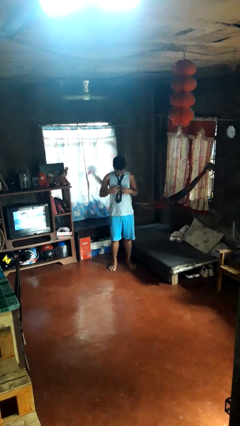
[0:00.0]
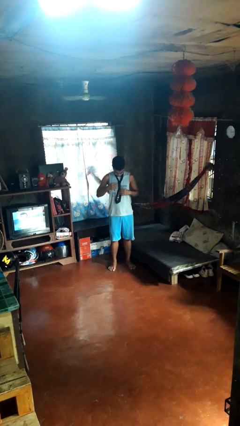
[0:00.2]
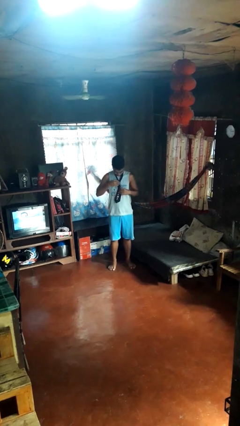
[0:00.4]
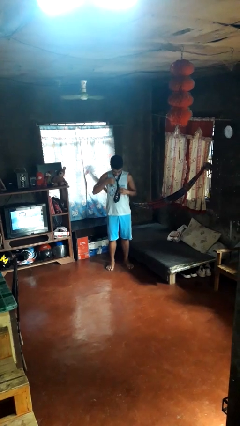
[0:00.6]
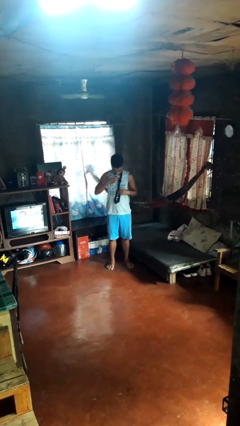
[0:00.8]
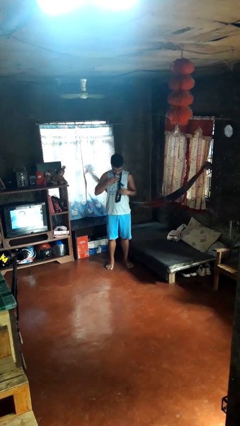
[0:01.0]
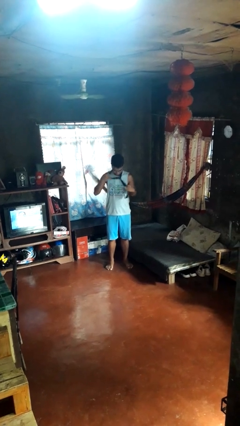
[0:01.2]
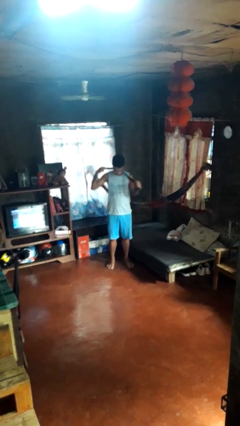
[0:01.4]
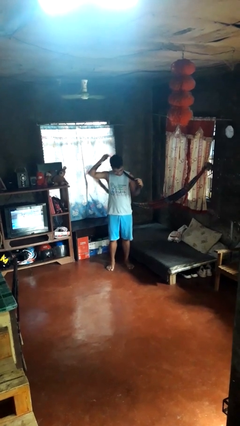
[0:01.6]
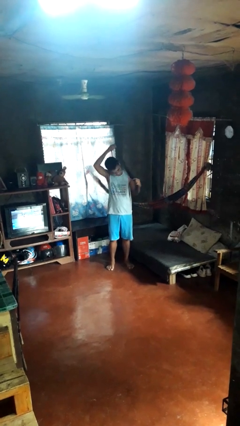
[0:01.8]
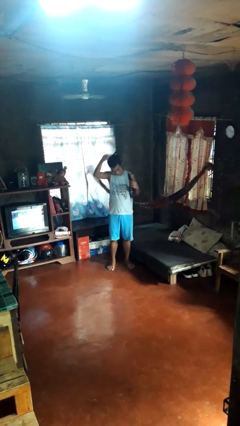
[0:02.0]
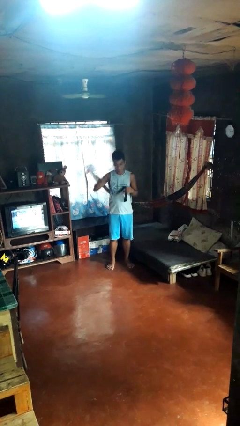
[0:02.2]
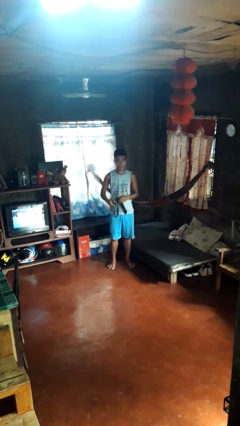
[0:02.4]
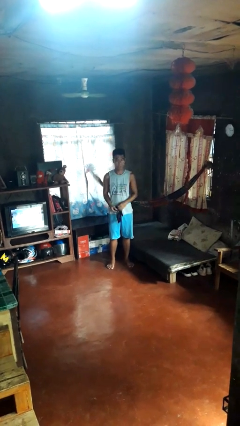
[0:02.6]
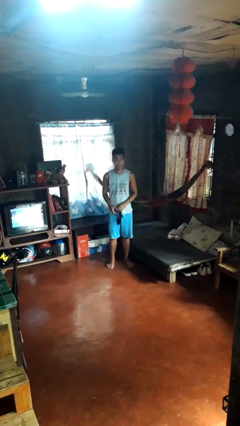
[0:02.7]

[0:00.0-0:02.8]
person takes off necktie

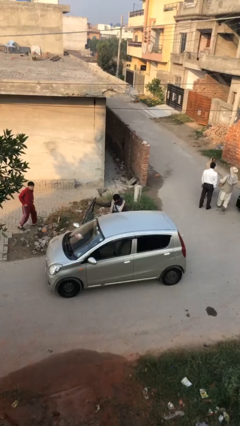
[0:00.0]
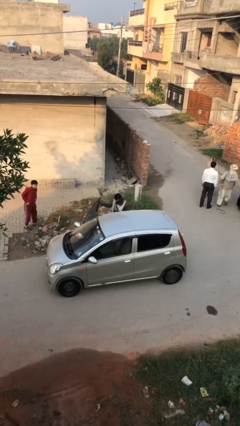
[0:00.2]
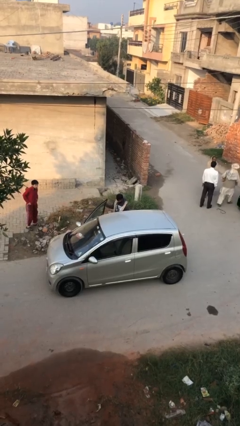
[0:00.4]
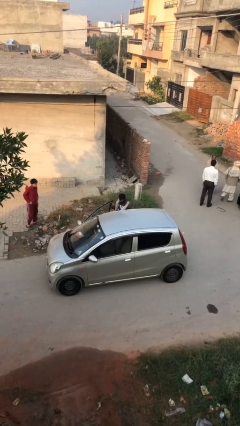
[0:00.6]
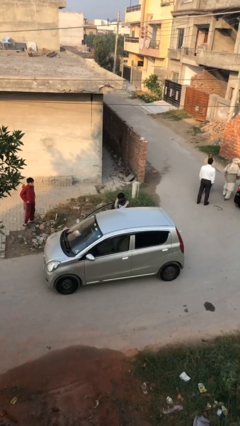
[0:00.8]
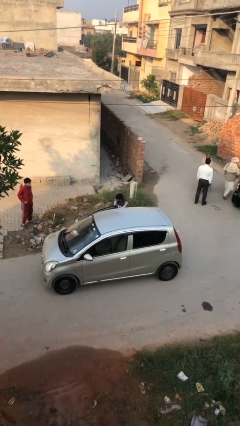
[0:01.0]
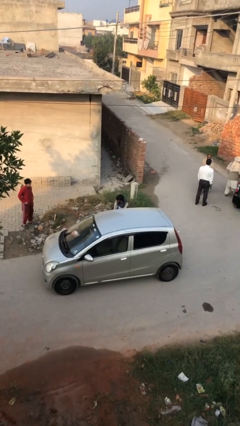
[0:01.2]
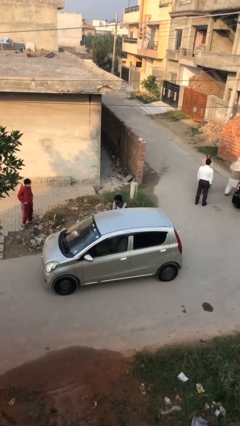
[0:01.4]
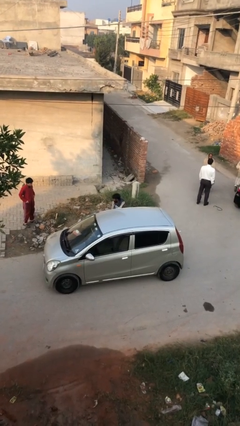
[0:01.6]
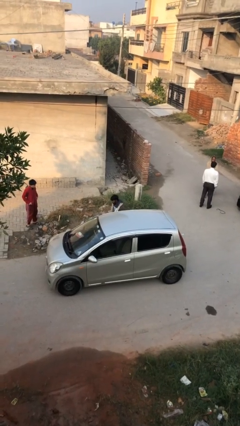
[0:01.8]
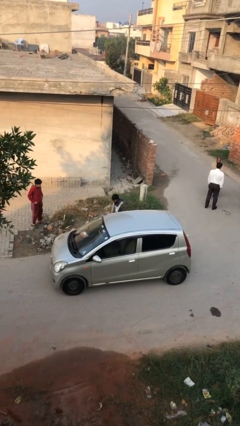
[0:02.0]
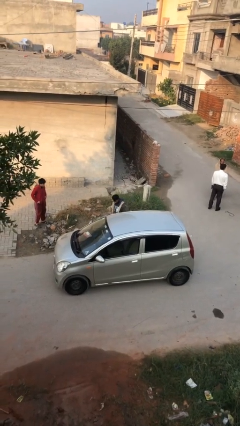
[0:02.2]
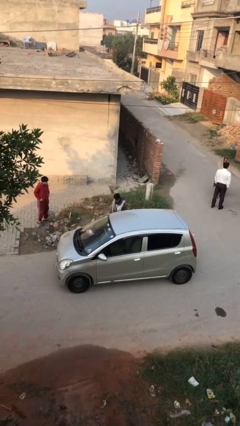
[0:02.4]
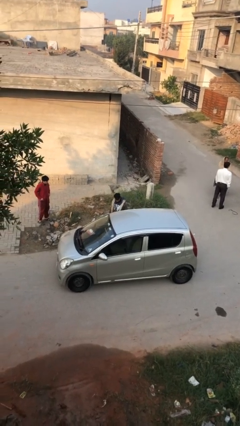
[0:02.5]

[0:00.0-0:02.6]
person closes car door

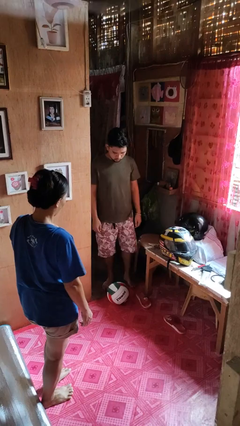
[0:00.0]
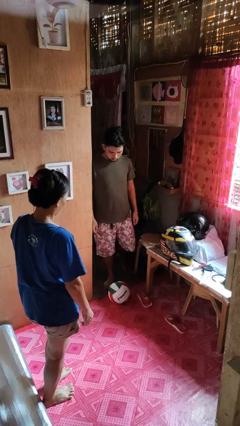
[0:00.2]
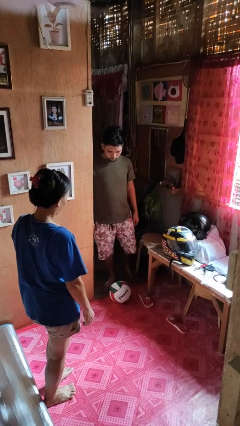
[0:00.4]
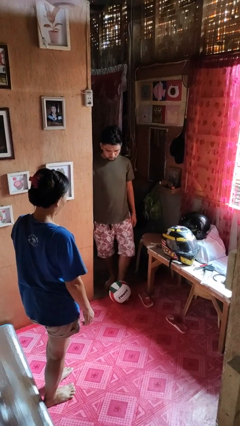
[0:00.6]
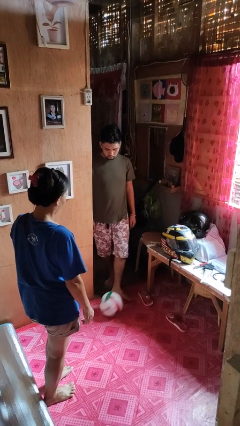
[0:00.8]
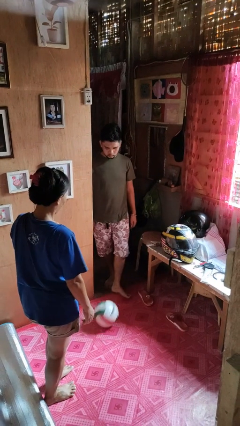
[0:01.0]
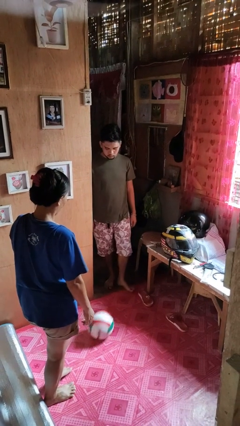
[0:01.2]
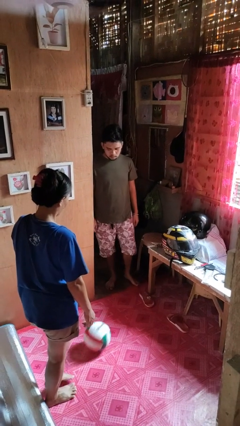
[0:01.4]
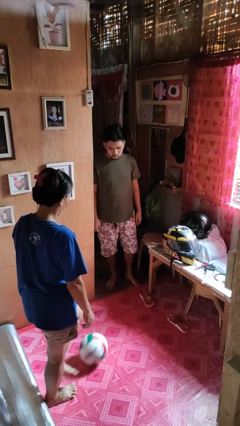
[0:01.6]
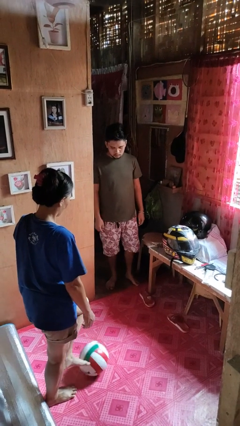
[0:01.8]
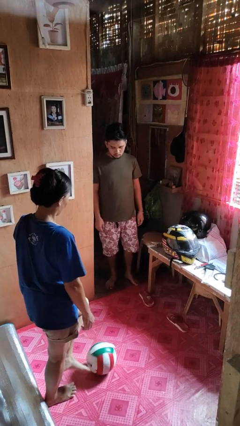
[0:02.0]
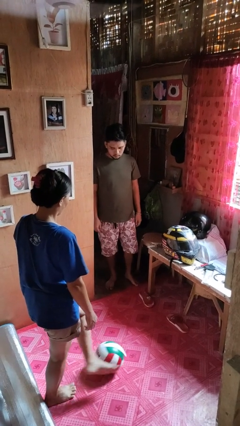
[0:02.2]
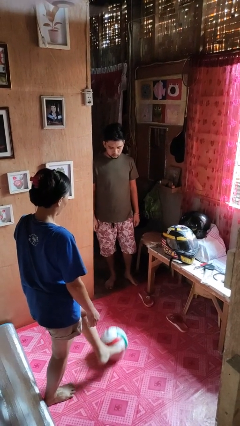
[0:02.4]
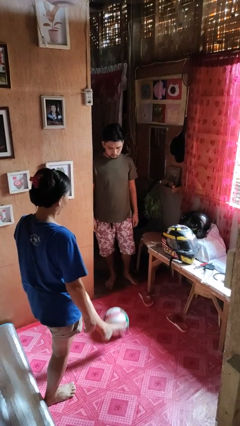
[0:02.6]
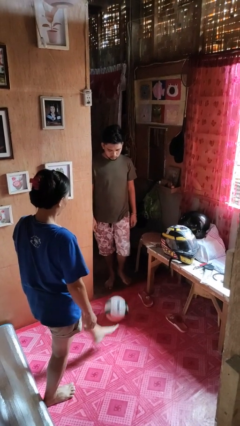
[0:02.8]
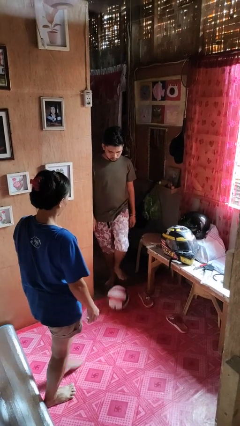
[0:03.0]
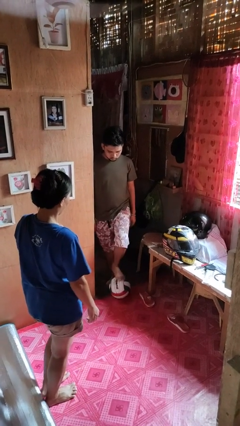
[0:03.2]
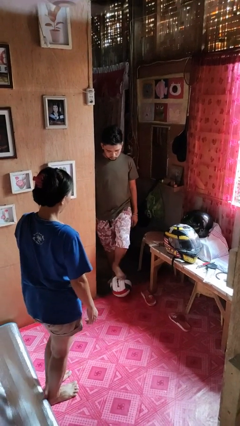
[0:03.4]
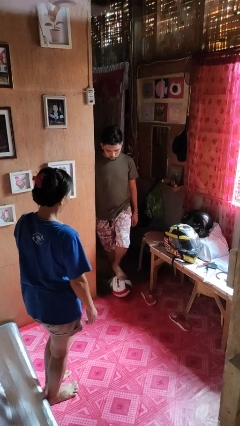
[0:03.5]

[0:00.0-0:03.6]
person kicks object to person

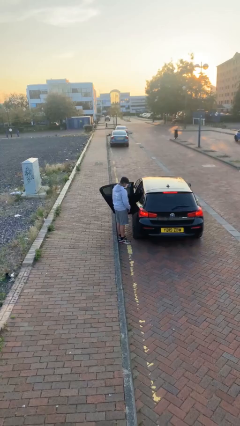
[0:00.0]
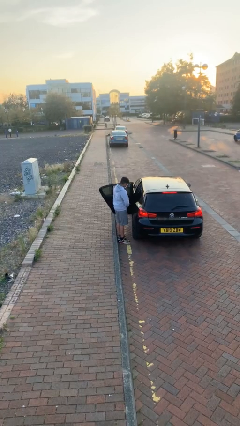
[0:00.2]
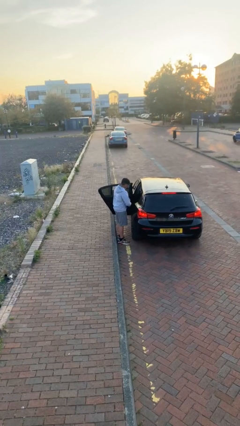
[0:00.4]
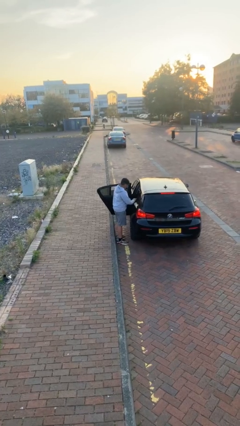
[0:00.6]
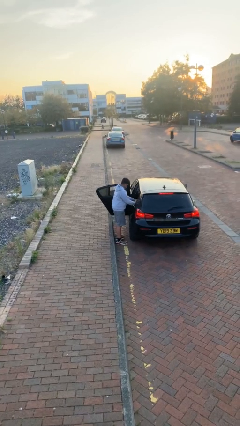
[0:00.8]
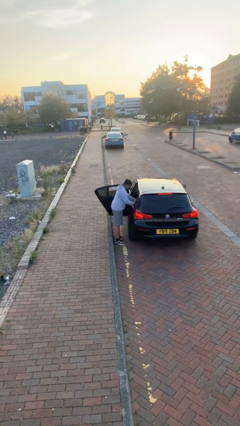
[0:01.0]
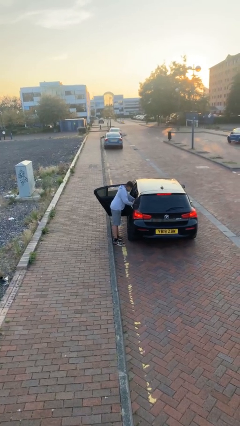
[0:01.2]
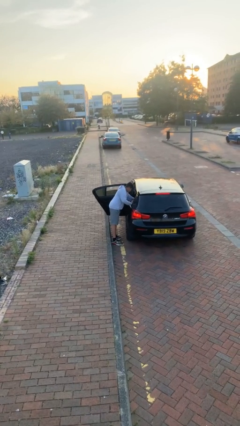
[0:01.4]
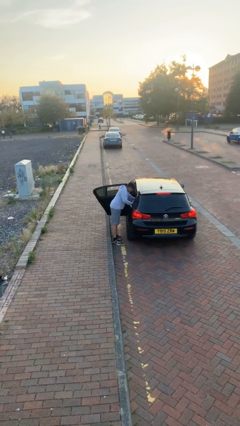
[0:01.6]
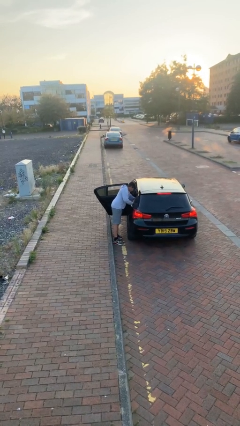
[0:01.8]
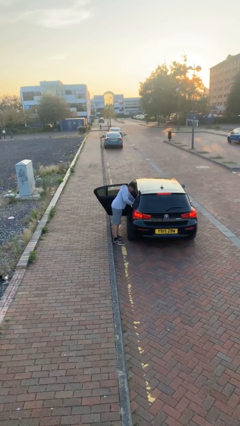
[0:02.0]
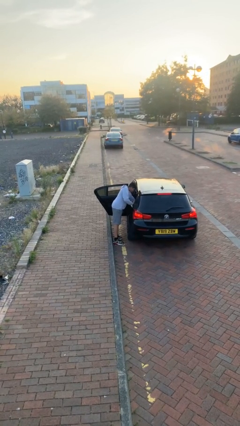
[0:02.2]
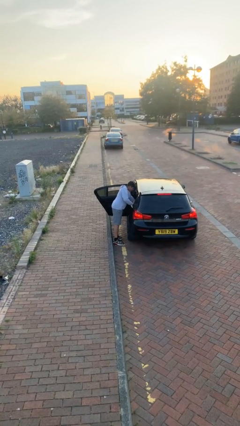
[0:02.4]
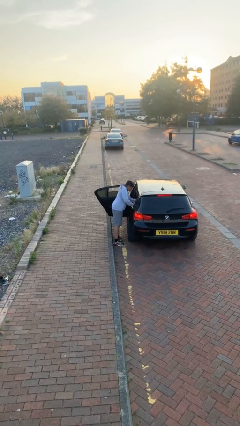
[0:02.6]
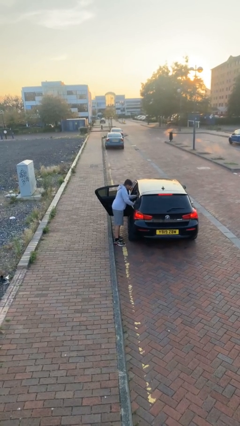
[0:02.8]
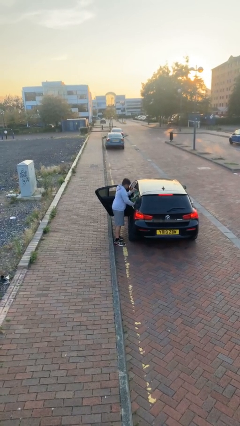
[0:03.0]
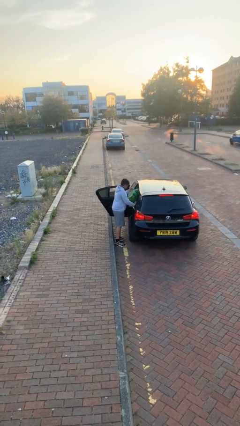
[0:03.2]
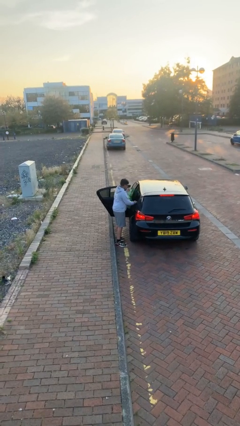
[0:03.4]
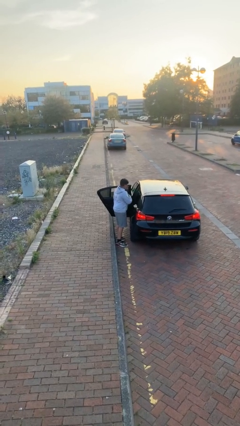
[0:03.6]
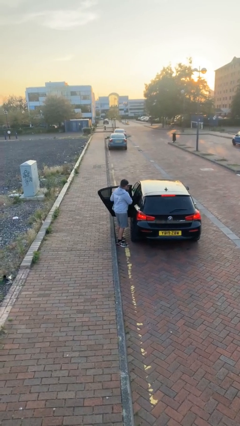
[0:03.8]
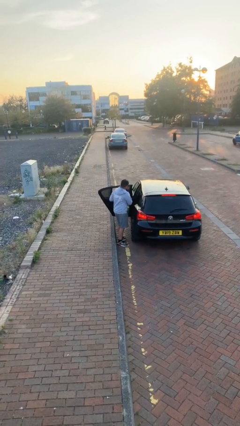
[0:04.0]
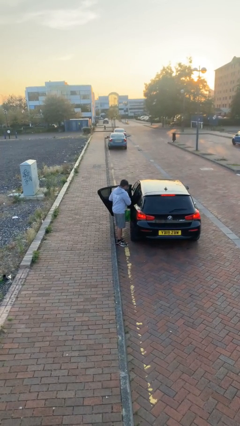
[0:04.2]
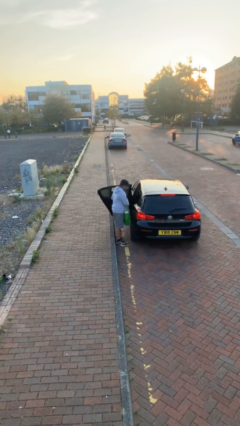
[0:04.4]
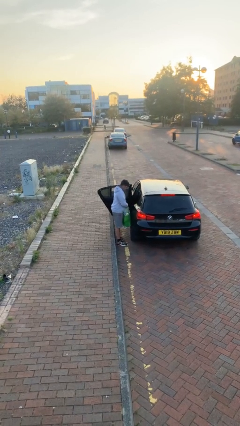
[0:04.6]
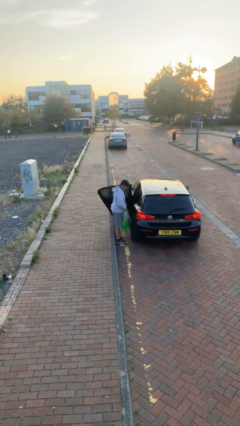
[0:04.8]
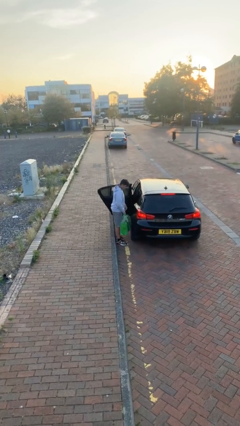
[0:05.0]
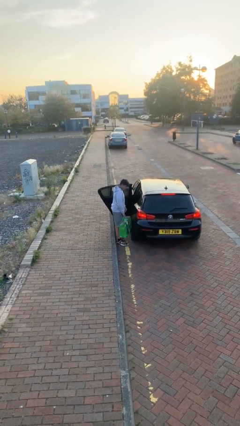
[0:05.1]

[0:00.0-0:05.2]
person unloads car

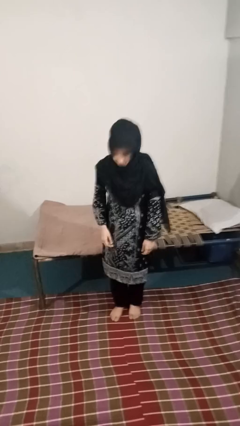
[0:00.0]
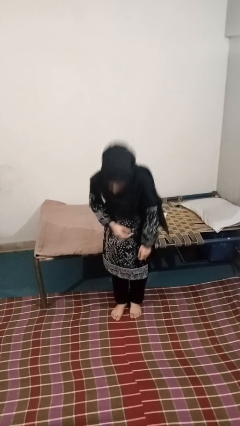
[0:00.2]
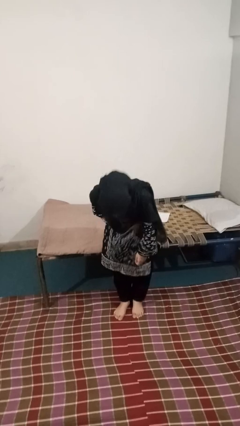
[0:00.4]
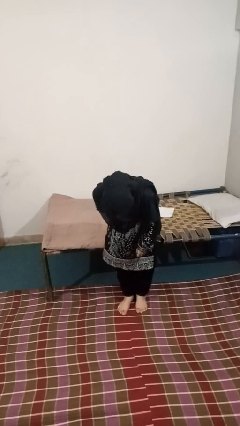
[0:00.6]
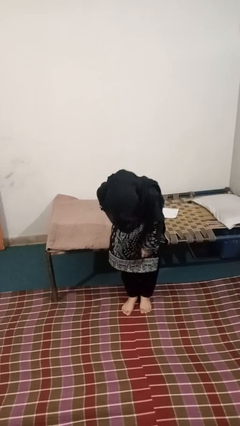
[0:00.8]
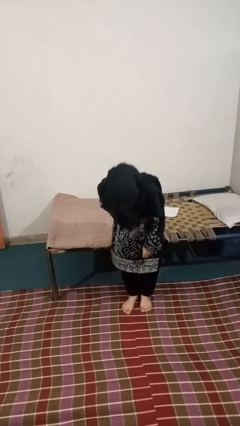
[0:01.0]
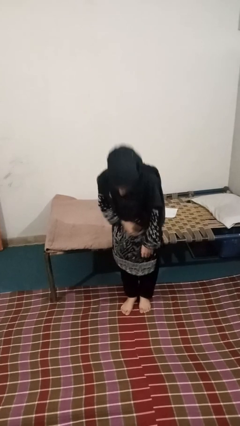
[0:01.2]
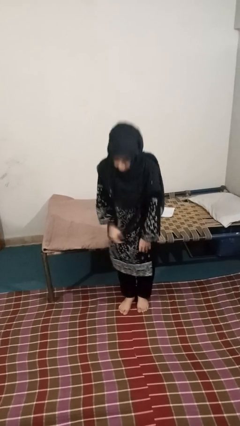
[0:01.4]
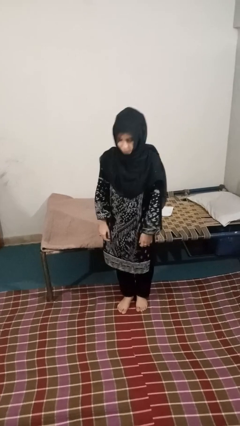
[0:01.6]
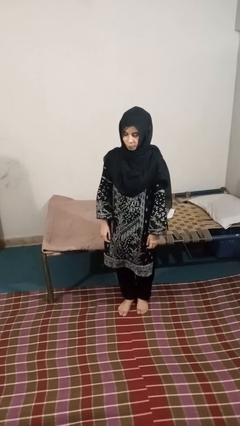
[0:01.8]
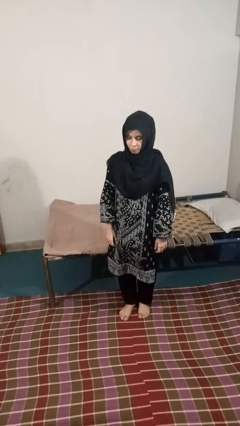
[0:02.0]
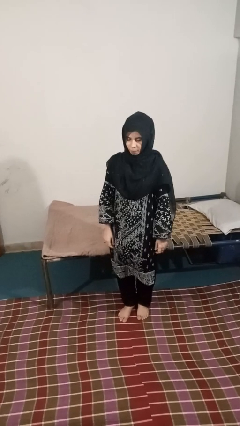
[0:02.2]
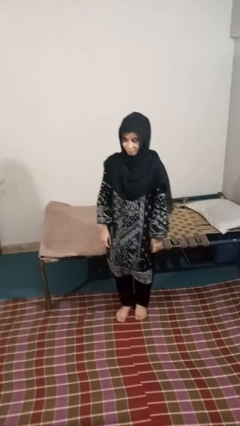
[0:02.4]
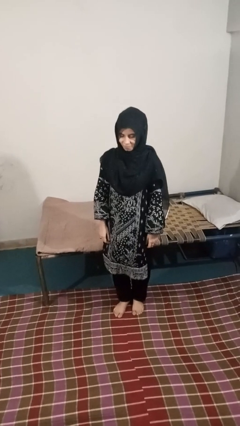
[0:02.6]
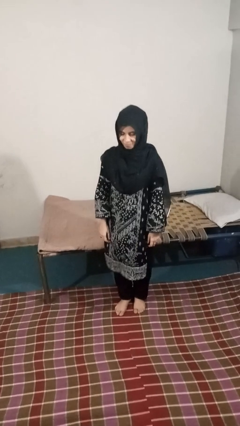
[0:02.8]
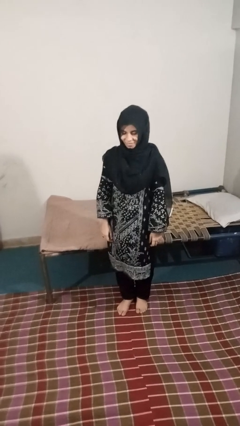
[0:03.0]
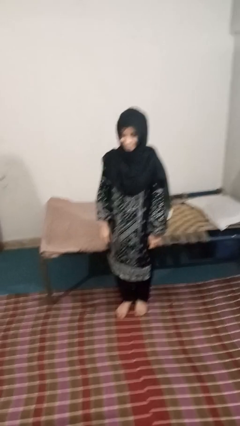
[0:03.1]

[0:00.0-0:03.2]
person bows
